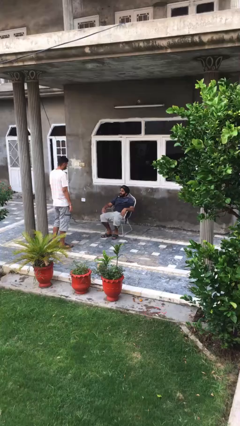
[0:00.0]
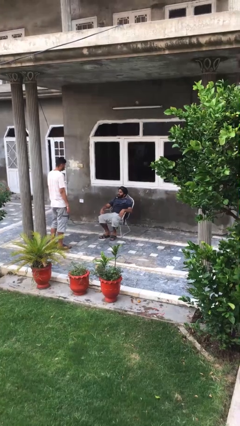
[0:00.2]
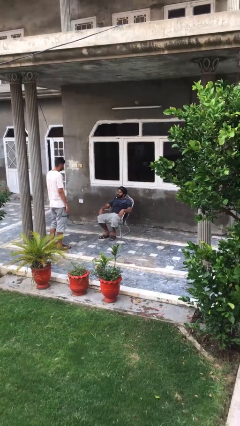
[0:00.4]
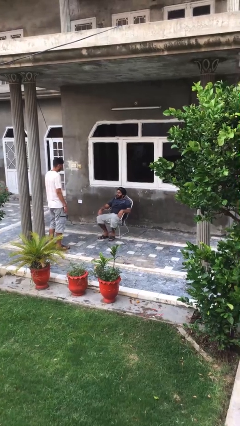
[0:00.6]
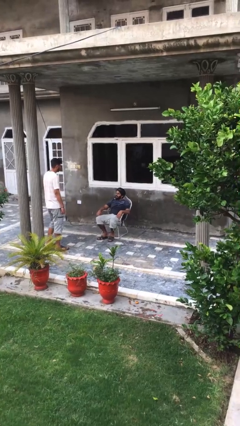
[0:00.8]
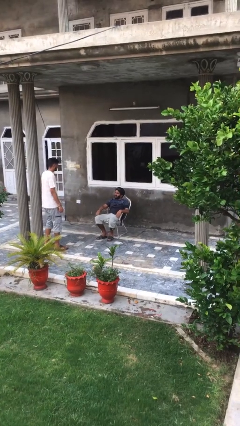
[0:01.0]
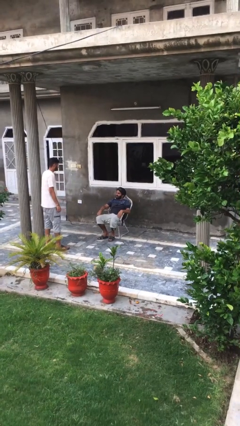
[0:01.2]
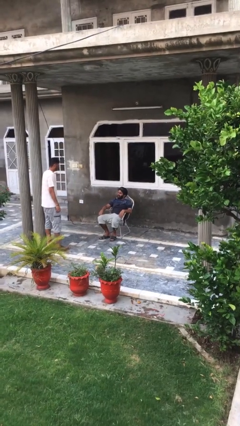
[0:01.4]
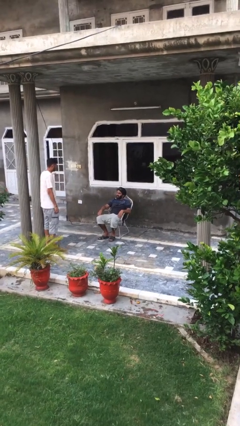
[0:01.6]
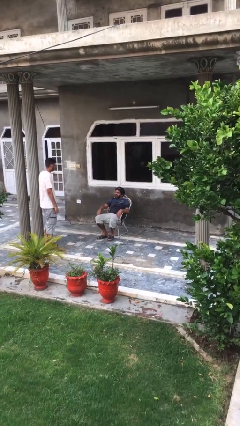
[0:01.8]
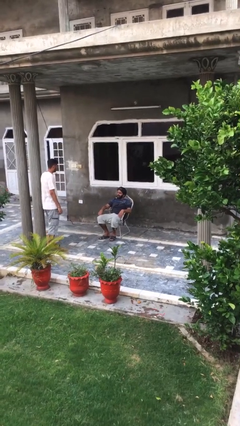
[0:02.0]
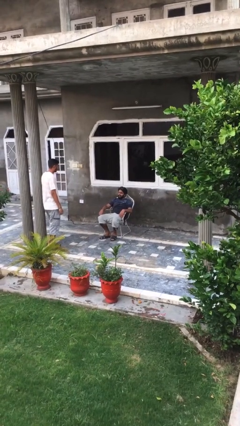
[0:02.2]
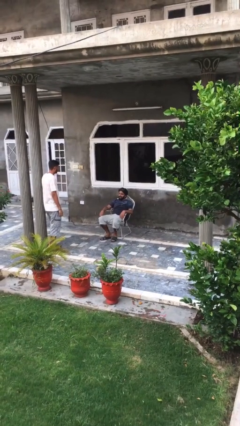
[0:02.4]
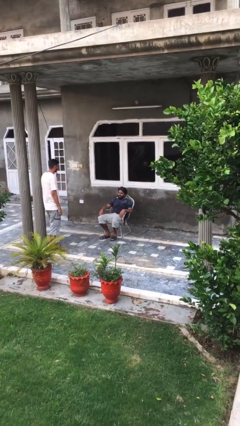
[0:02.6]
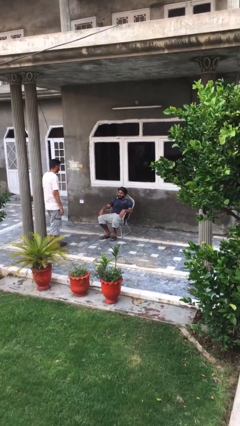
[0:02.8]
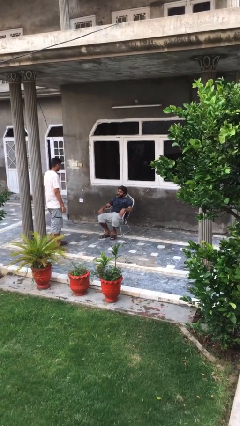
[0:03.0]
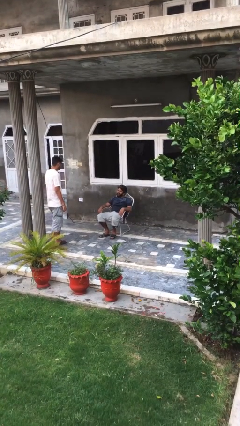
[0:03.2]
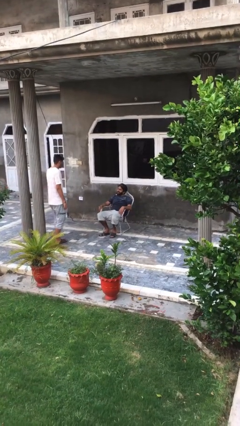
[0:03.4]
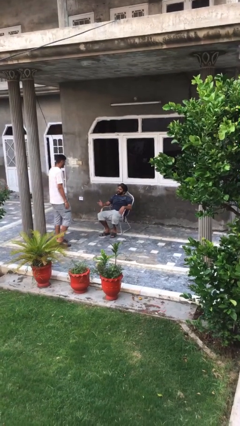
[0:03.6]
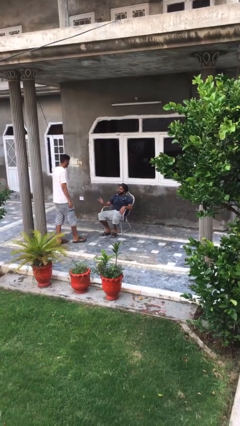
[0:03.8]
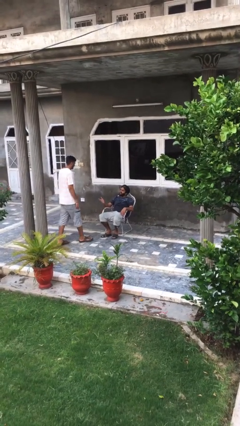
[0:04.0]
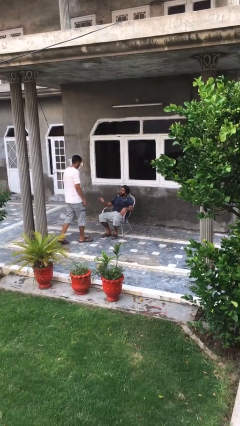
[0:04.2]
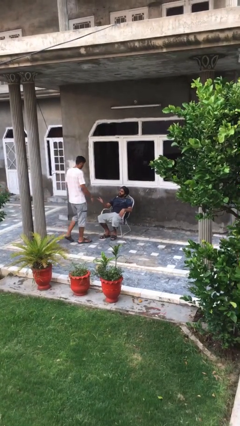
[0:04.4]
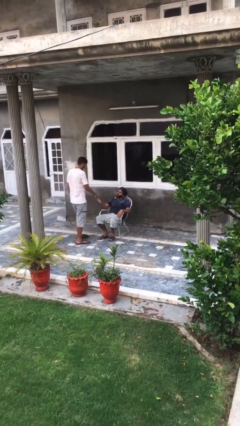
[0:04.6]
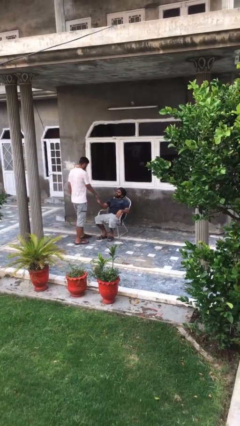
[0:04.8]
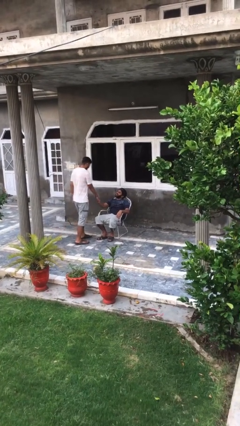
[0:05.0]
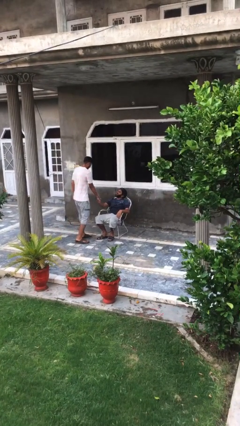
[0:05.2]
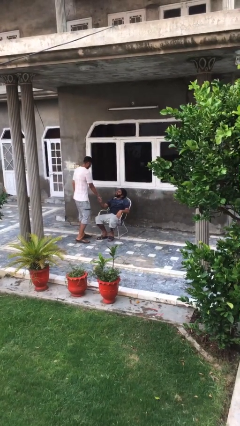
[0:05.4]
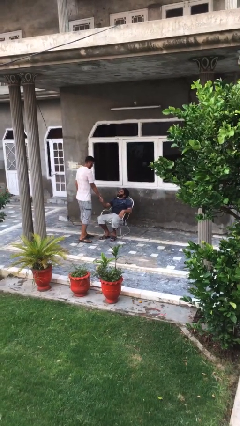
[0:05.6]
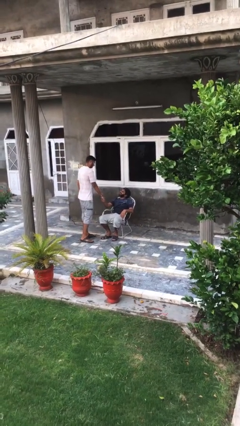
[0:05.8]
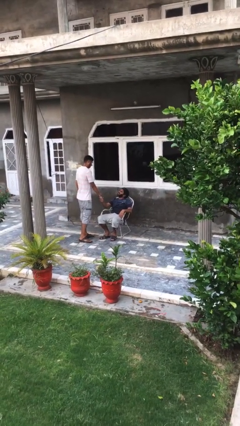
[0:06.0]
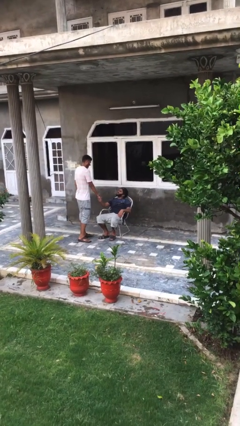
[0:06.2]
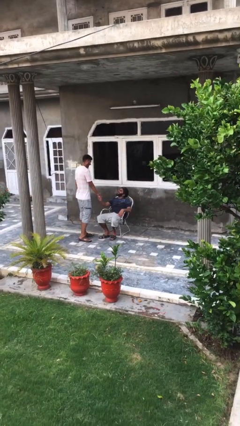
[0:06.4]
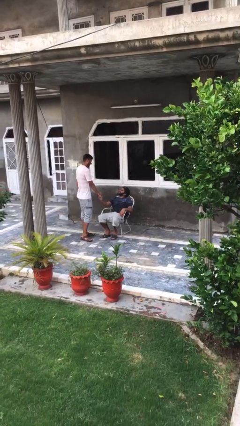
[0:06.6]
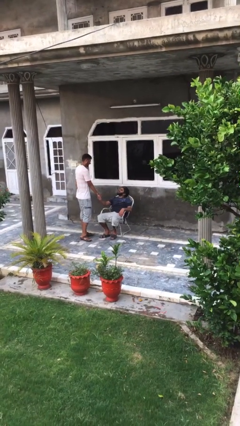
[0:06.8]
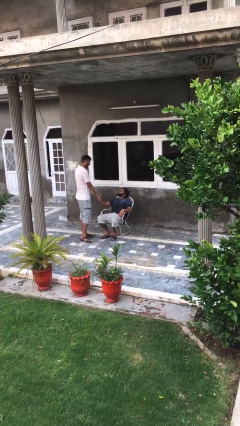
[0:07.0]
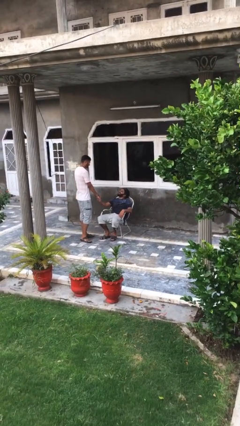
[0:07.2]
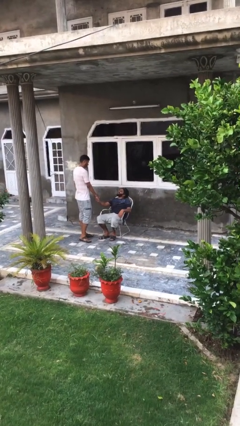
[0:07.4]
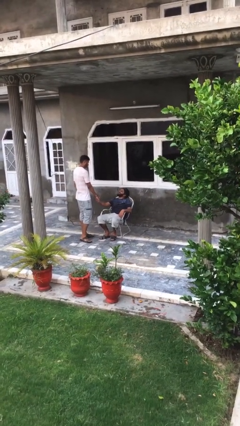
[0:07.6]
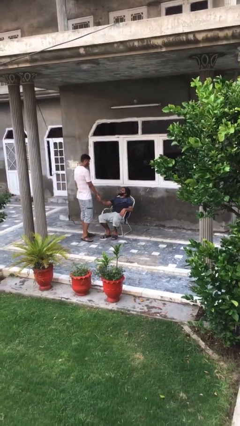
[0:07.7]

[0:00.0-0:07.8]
person shakes hand

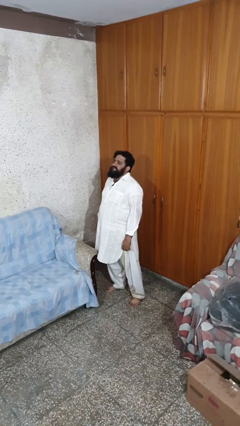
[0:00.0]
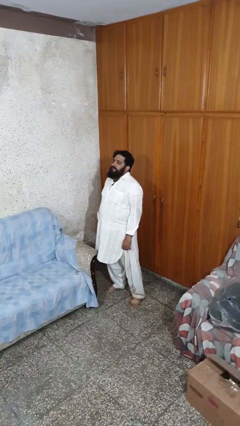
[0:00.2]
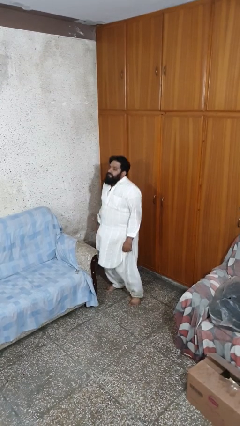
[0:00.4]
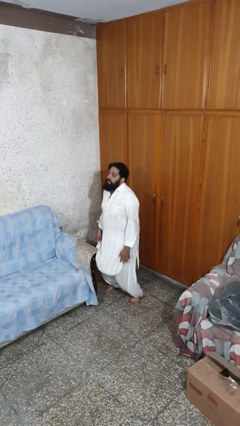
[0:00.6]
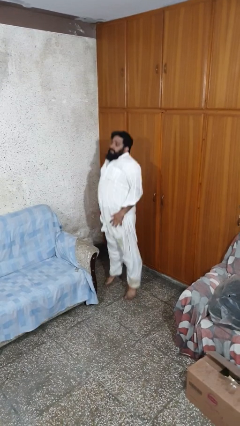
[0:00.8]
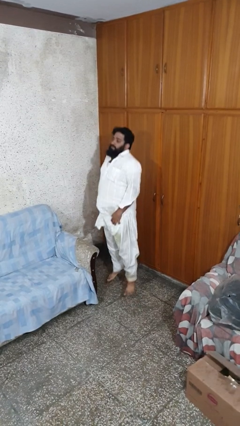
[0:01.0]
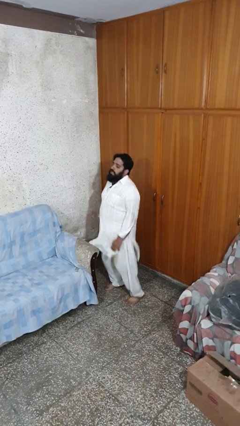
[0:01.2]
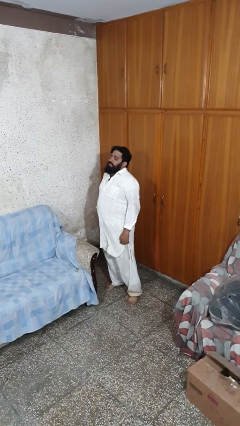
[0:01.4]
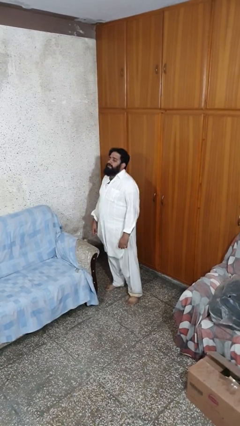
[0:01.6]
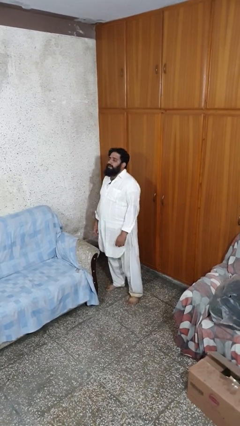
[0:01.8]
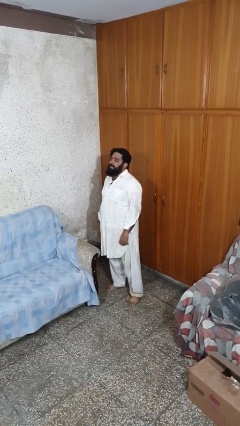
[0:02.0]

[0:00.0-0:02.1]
person jumps

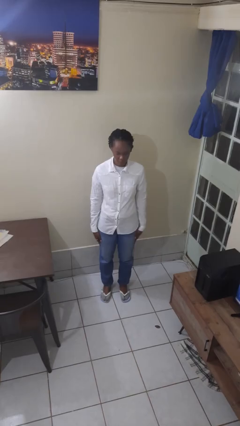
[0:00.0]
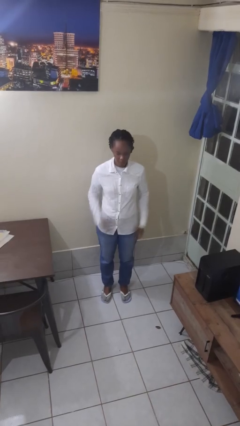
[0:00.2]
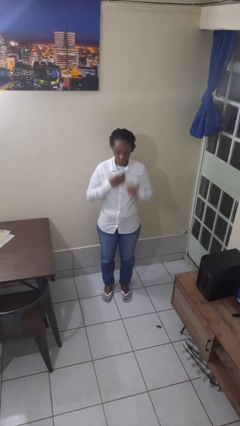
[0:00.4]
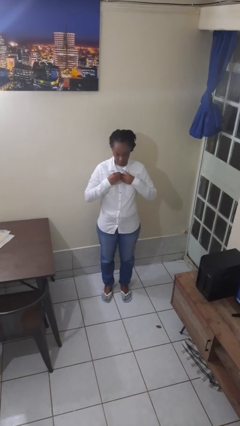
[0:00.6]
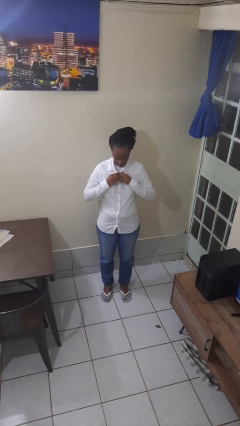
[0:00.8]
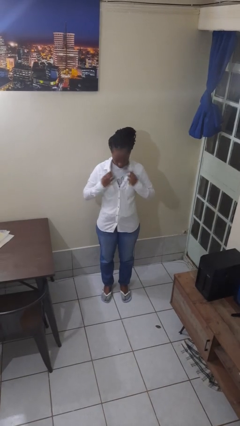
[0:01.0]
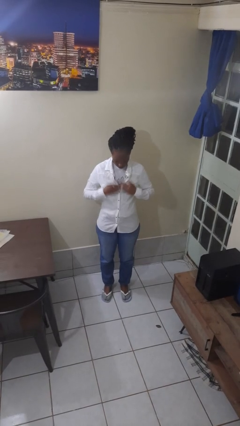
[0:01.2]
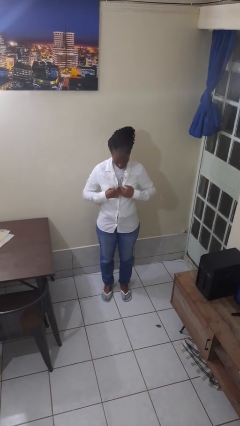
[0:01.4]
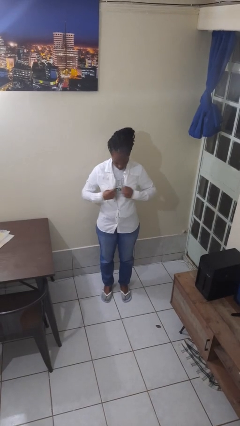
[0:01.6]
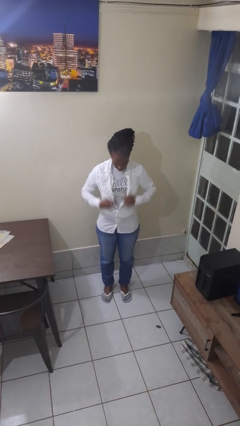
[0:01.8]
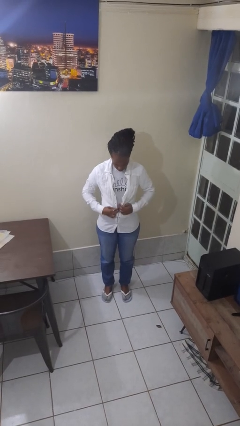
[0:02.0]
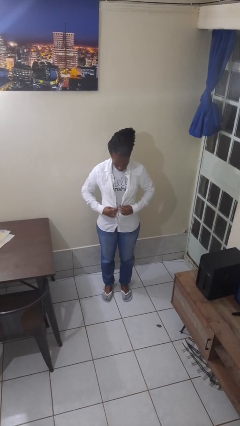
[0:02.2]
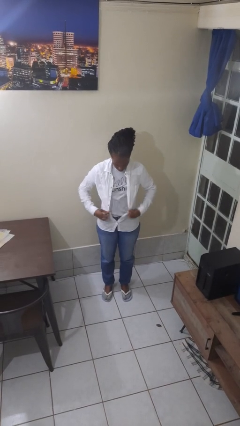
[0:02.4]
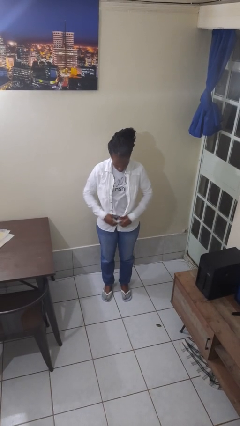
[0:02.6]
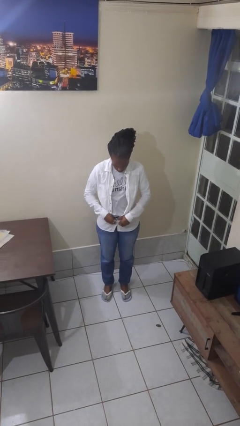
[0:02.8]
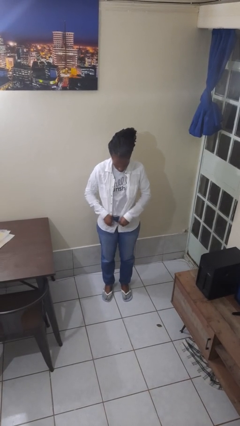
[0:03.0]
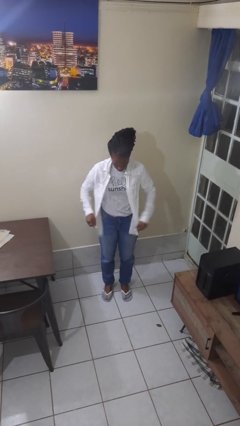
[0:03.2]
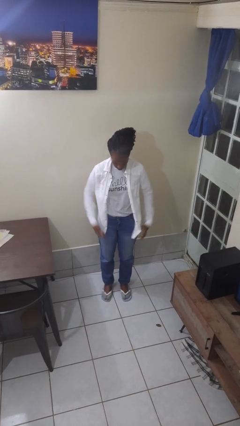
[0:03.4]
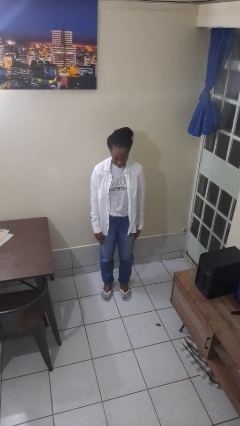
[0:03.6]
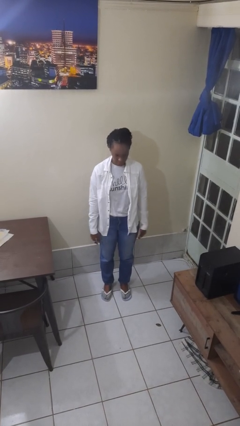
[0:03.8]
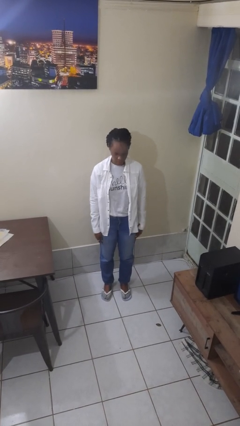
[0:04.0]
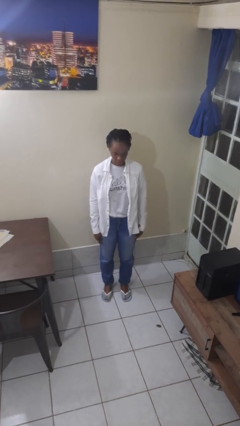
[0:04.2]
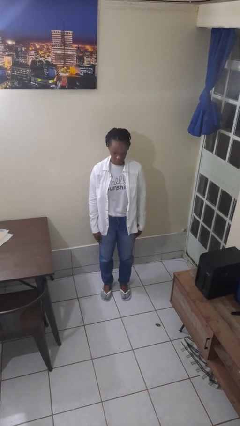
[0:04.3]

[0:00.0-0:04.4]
person unbuttons shirt

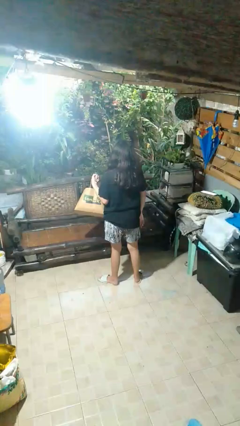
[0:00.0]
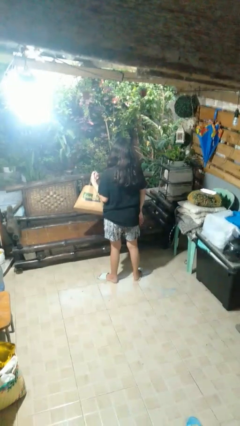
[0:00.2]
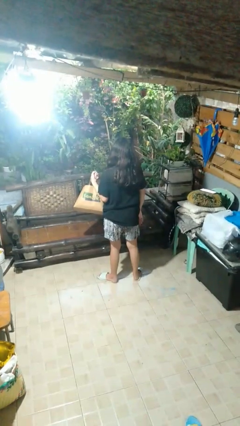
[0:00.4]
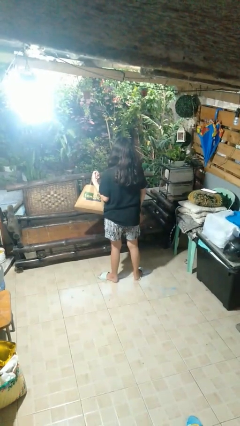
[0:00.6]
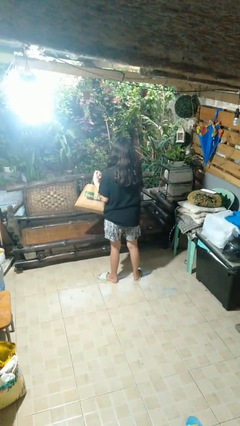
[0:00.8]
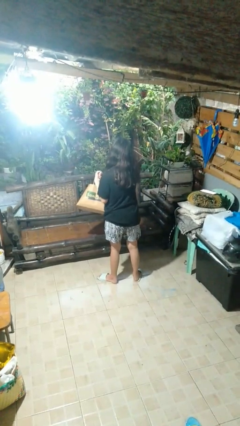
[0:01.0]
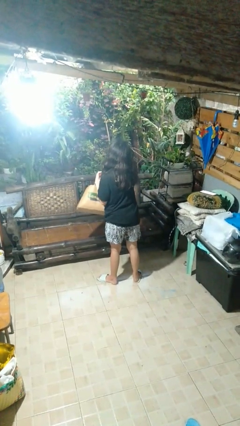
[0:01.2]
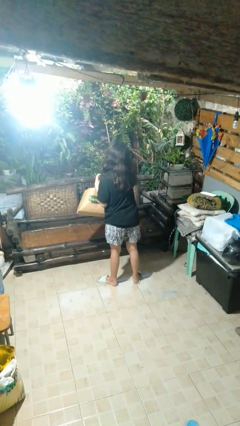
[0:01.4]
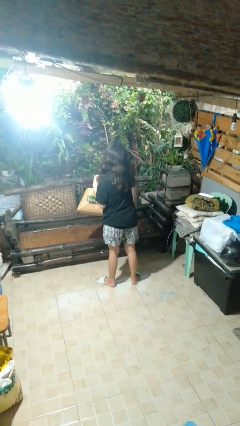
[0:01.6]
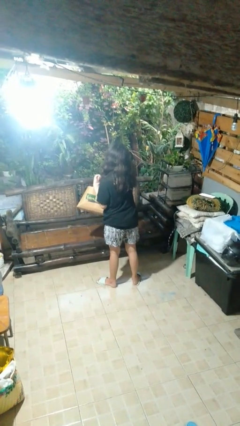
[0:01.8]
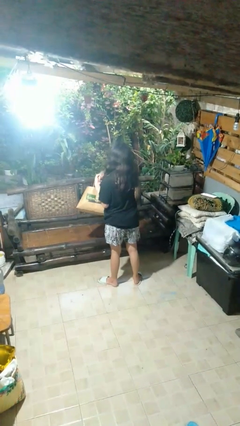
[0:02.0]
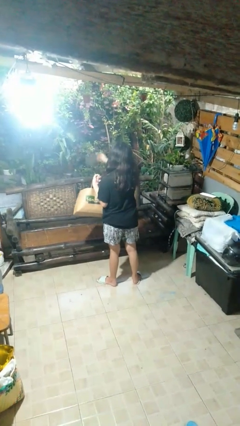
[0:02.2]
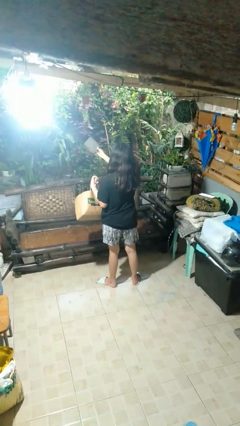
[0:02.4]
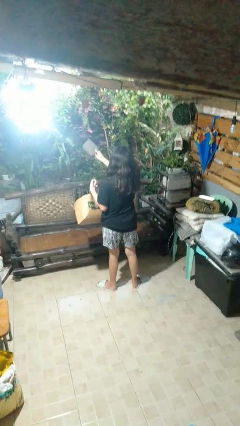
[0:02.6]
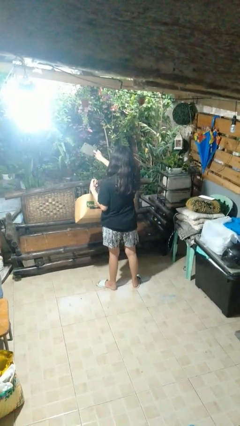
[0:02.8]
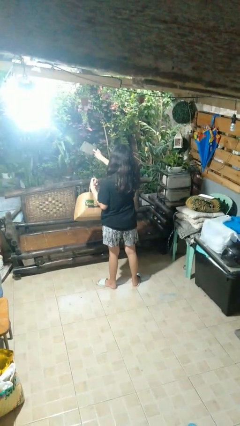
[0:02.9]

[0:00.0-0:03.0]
person takes object from bag

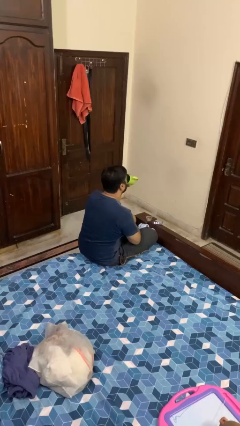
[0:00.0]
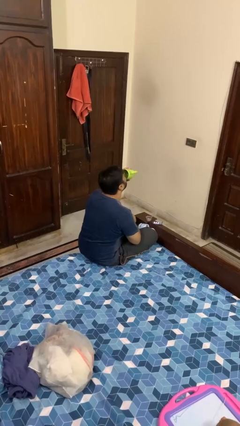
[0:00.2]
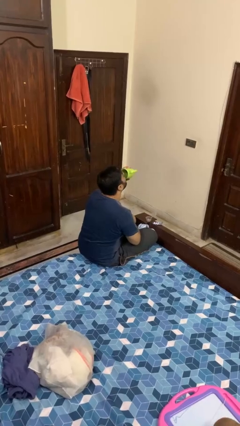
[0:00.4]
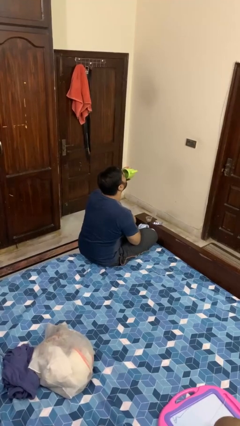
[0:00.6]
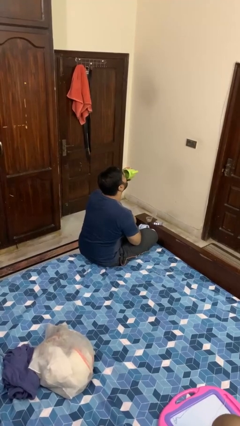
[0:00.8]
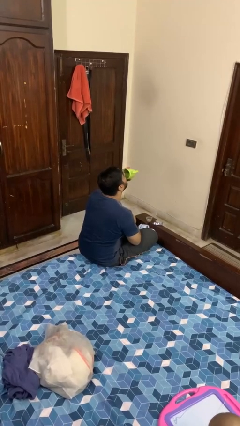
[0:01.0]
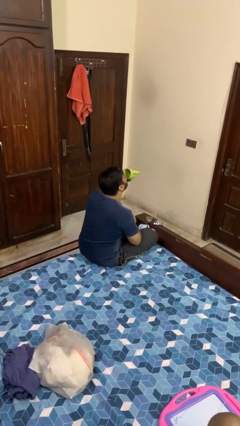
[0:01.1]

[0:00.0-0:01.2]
person drinks from cup
